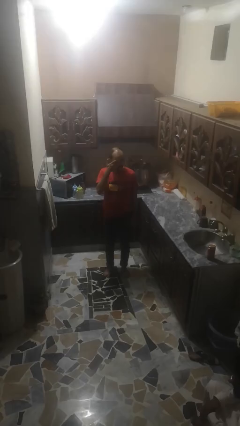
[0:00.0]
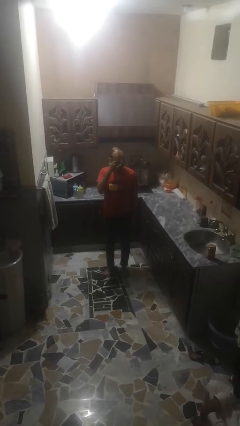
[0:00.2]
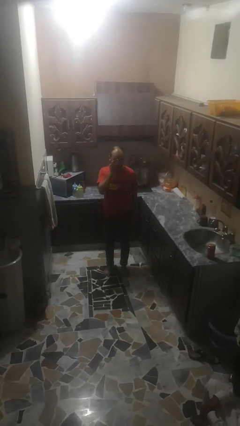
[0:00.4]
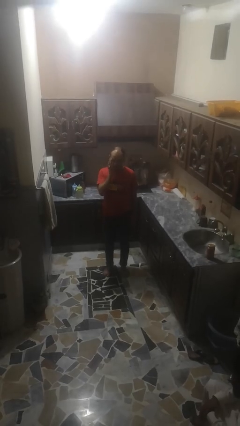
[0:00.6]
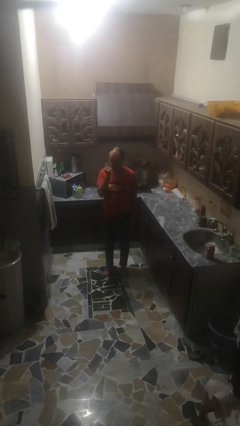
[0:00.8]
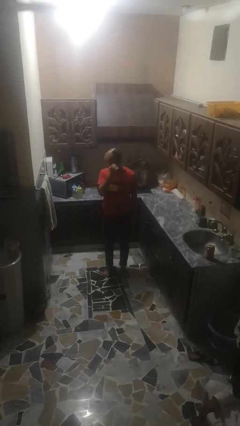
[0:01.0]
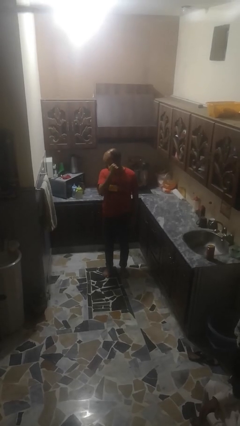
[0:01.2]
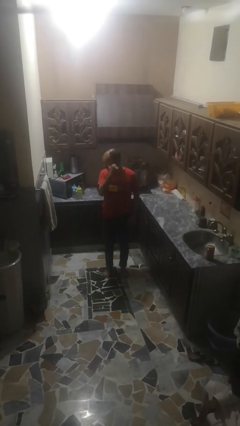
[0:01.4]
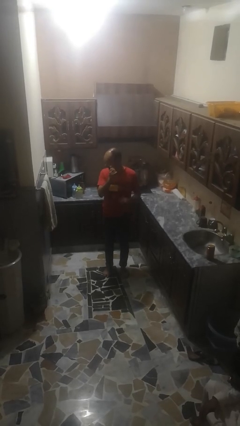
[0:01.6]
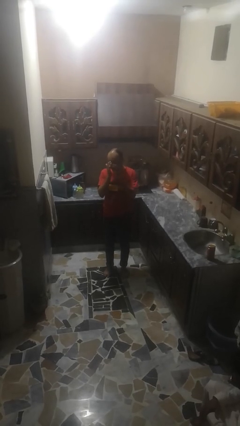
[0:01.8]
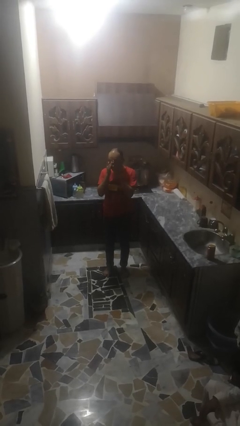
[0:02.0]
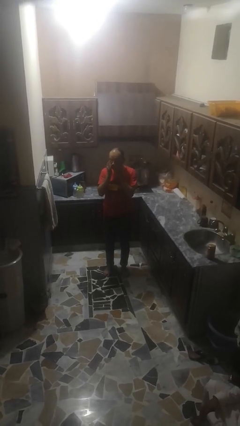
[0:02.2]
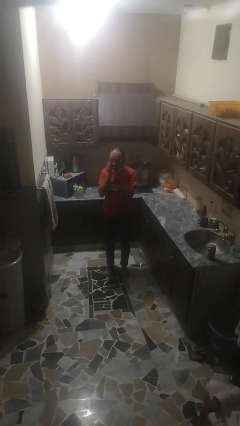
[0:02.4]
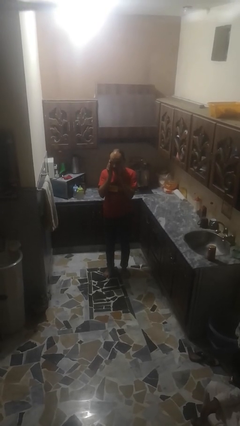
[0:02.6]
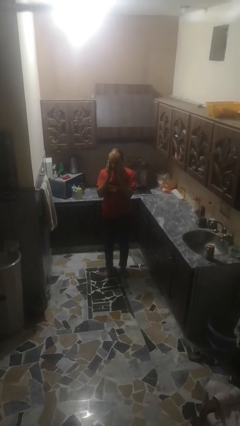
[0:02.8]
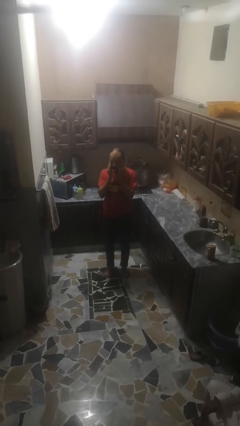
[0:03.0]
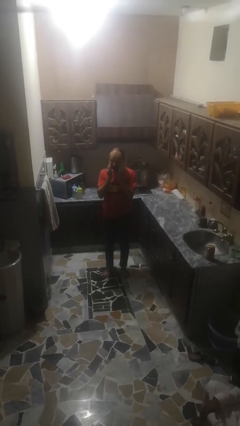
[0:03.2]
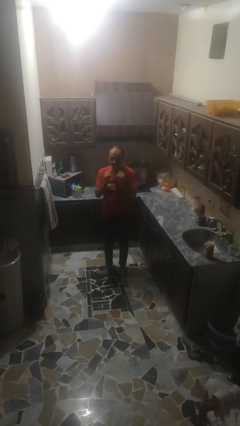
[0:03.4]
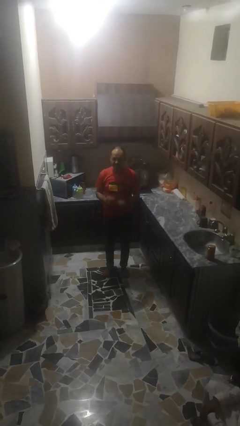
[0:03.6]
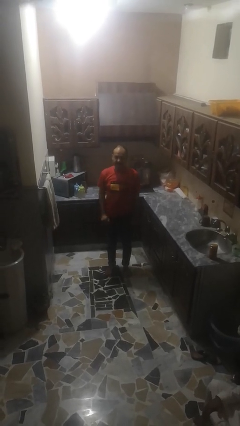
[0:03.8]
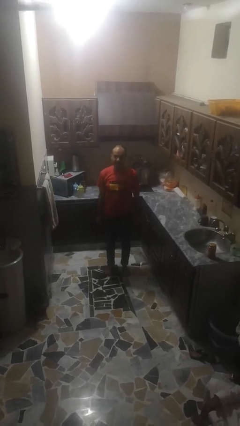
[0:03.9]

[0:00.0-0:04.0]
person rubs eyes

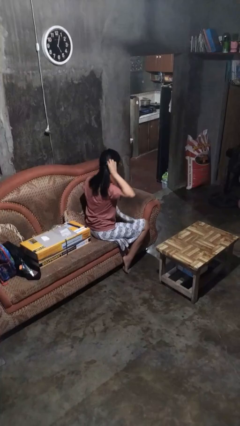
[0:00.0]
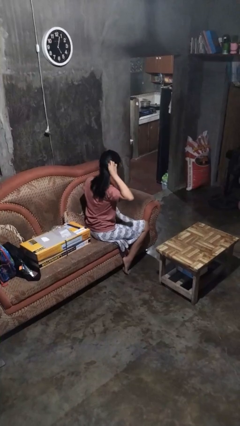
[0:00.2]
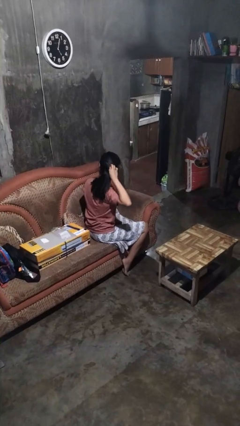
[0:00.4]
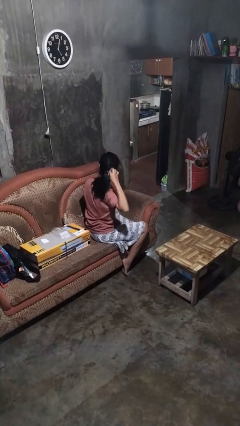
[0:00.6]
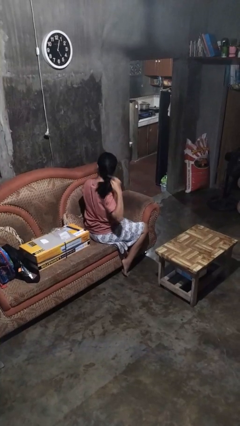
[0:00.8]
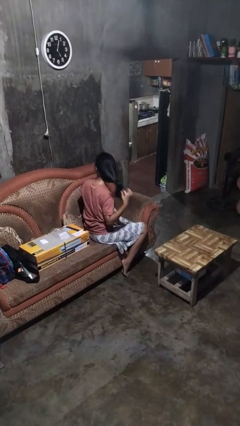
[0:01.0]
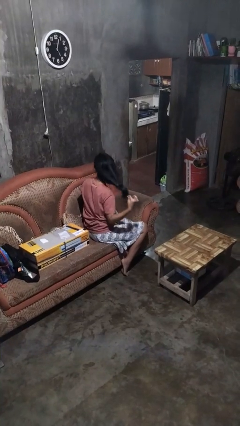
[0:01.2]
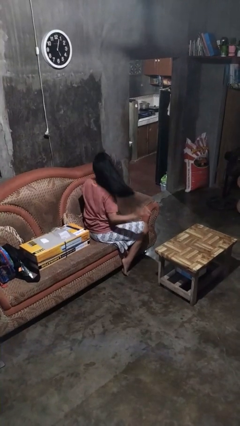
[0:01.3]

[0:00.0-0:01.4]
person takes off hairtie

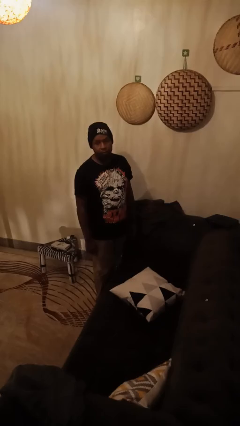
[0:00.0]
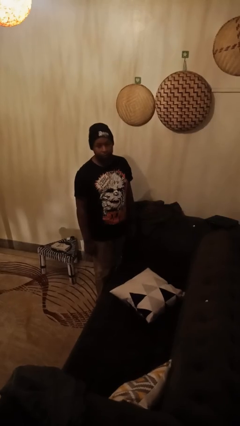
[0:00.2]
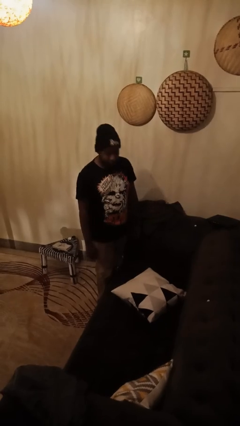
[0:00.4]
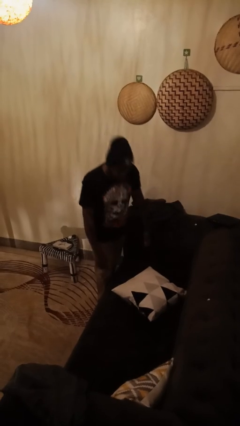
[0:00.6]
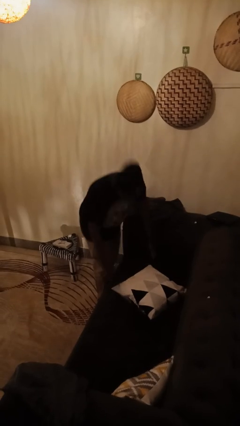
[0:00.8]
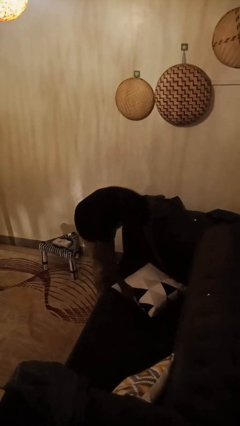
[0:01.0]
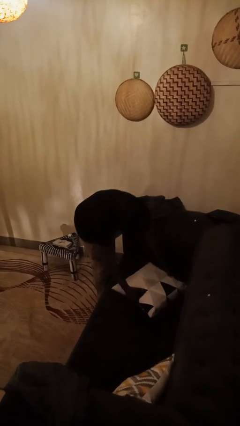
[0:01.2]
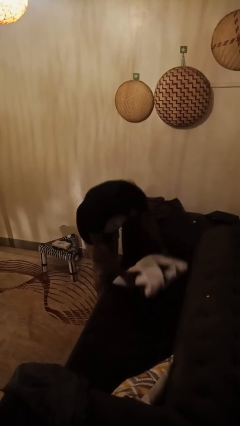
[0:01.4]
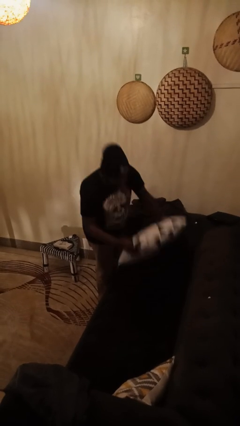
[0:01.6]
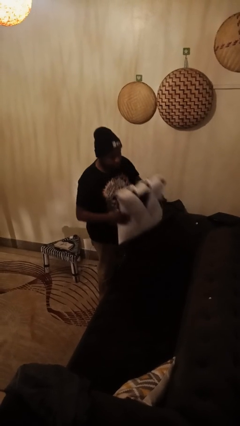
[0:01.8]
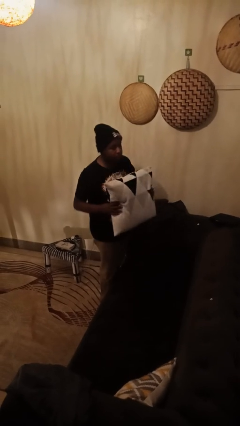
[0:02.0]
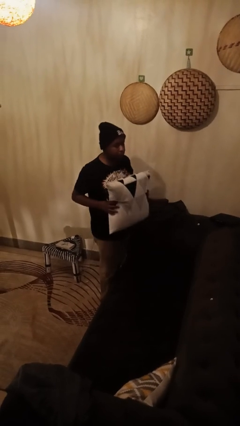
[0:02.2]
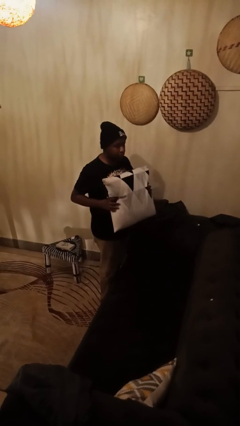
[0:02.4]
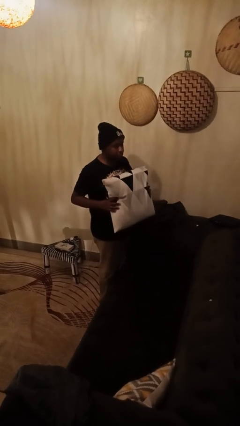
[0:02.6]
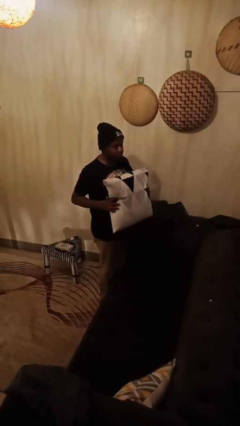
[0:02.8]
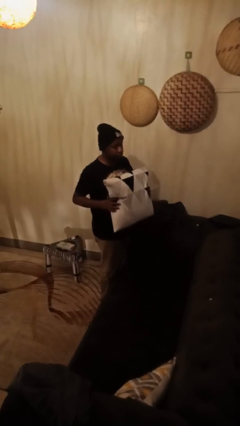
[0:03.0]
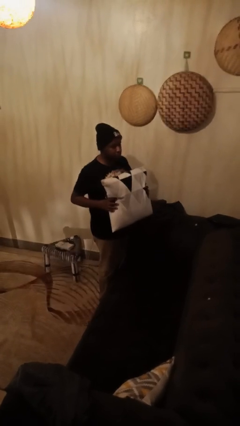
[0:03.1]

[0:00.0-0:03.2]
person picks up object from couch

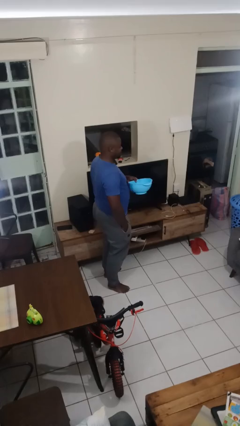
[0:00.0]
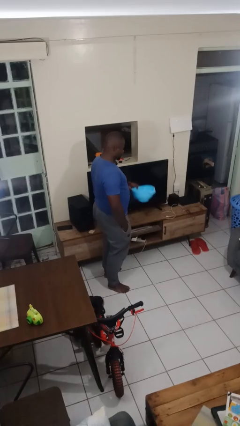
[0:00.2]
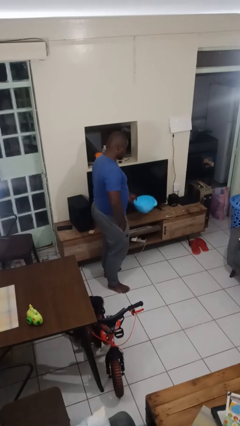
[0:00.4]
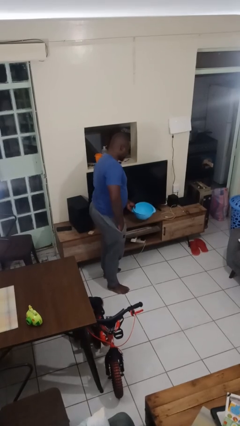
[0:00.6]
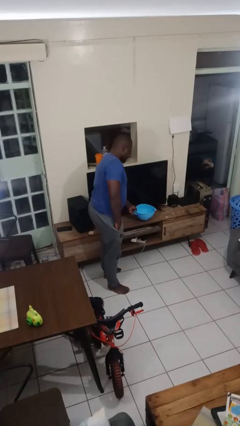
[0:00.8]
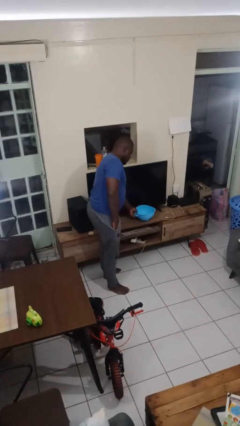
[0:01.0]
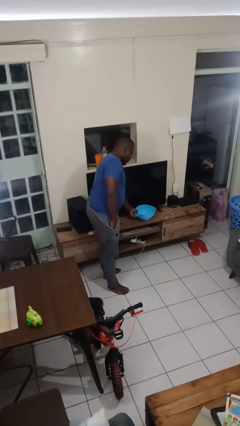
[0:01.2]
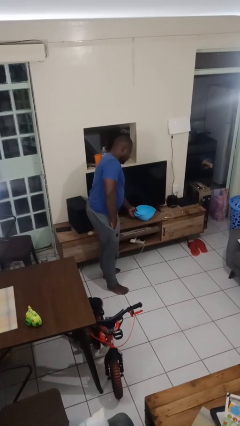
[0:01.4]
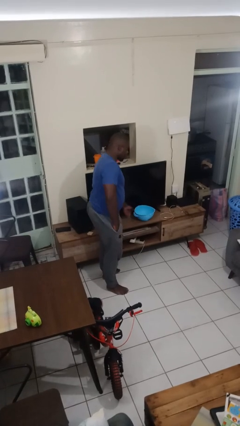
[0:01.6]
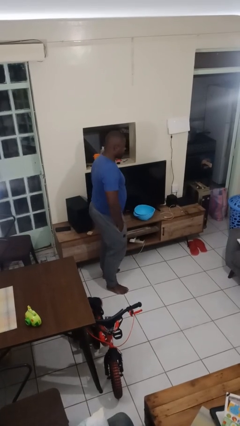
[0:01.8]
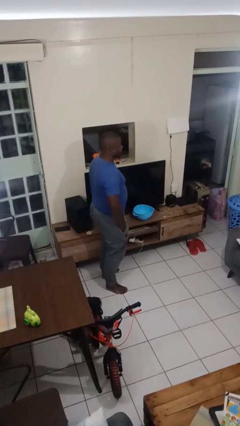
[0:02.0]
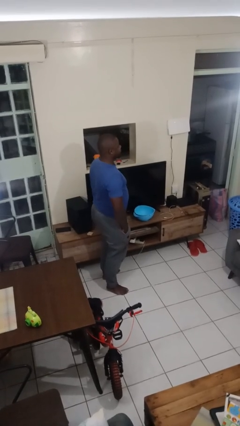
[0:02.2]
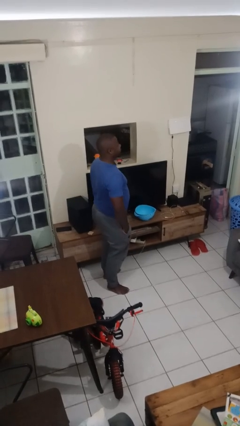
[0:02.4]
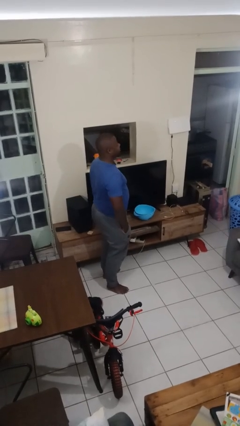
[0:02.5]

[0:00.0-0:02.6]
person puts down object on countertop

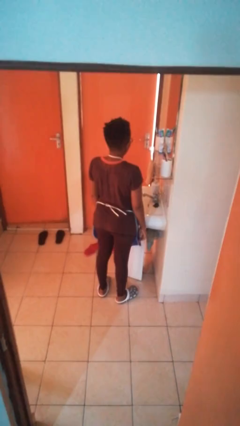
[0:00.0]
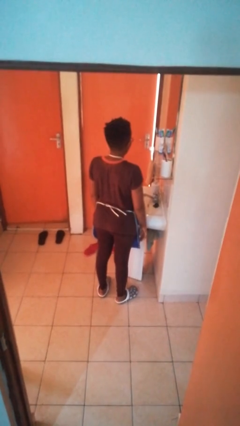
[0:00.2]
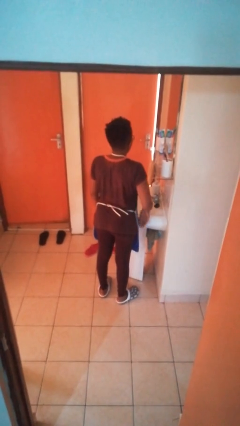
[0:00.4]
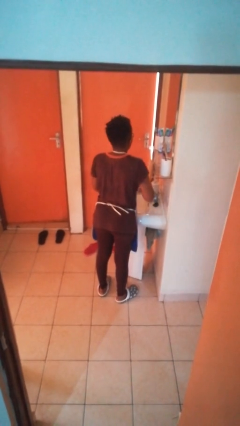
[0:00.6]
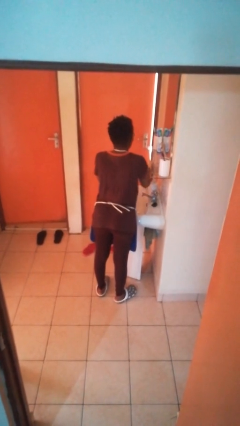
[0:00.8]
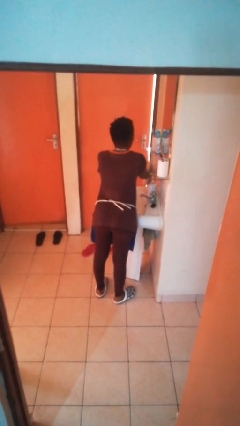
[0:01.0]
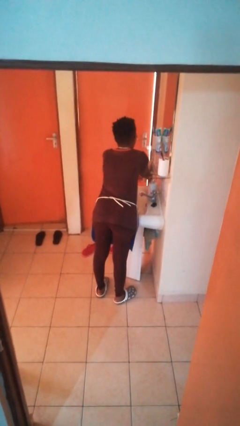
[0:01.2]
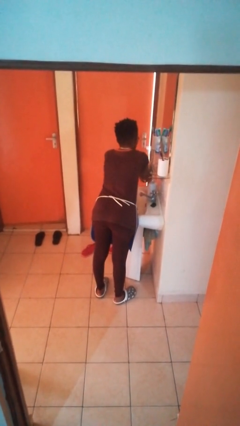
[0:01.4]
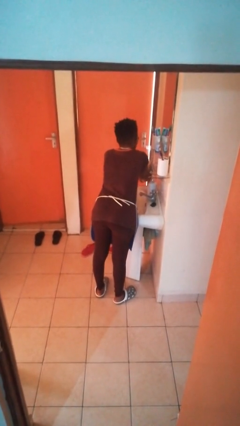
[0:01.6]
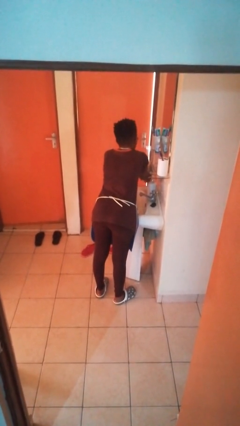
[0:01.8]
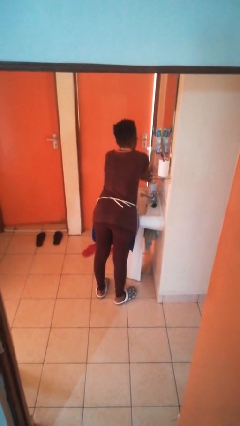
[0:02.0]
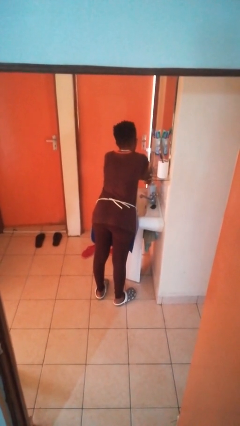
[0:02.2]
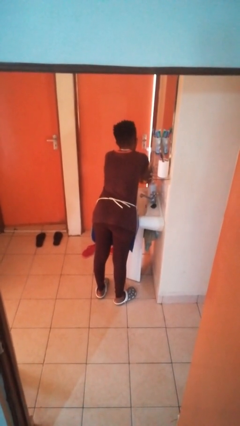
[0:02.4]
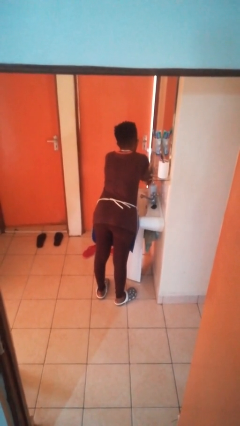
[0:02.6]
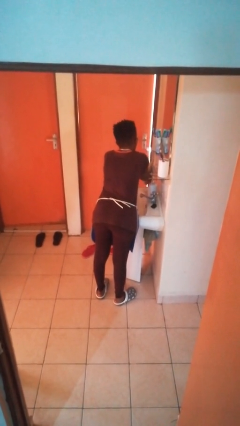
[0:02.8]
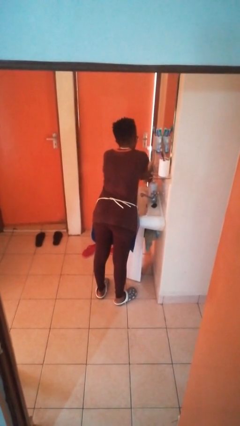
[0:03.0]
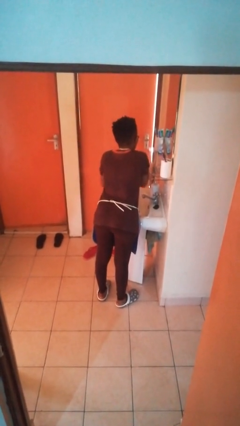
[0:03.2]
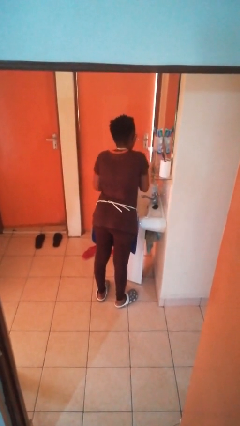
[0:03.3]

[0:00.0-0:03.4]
person dries hands with towel

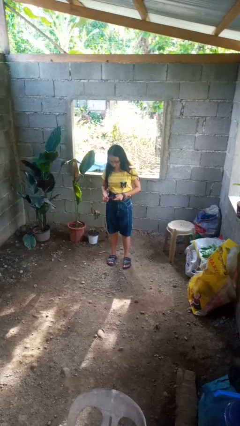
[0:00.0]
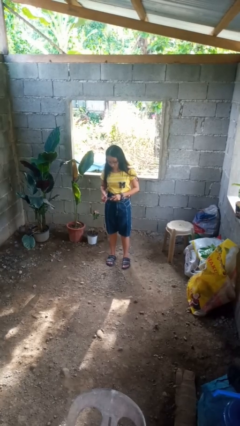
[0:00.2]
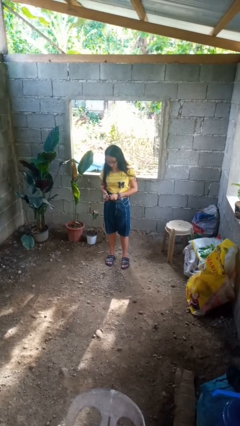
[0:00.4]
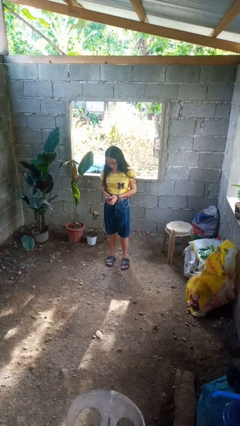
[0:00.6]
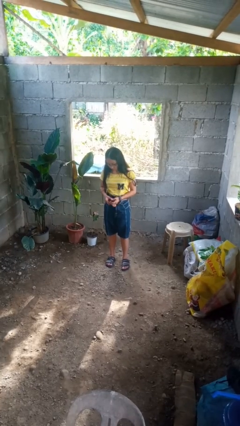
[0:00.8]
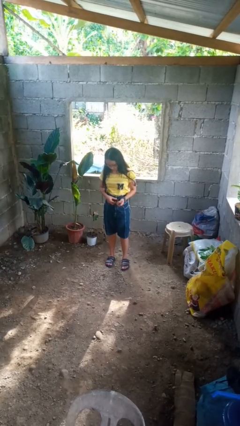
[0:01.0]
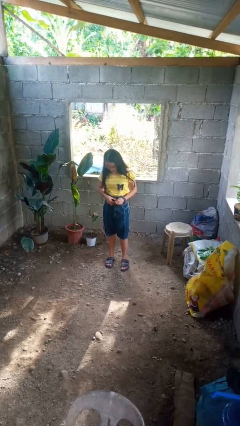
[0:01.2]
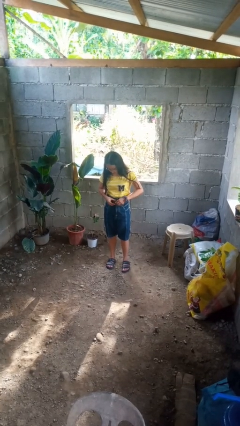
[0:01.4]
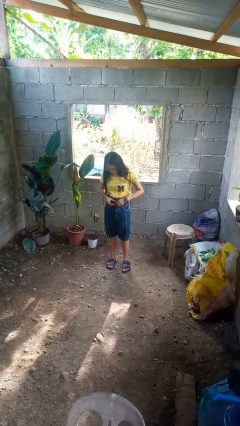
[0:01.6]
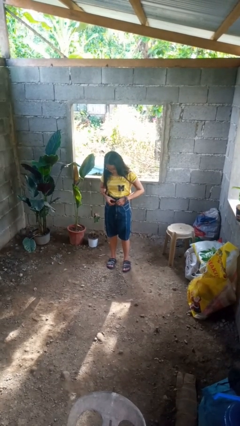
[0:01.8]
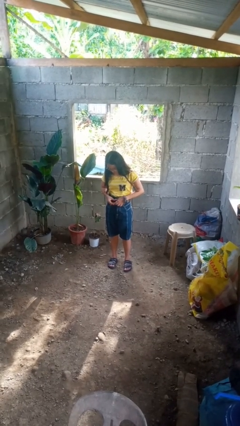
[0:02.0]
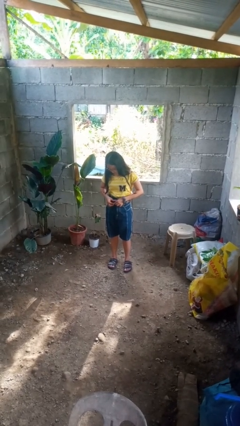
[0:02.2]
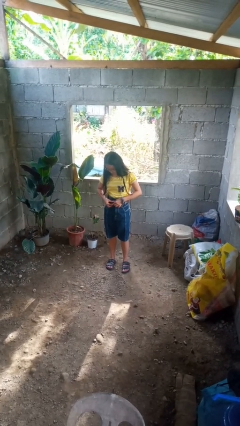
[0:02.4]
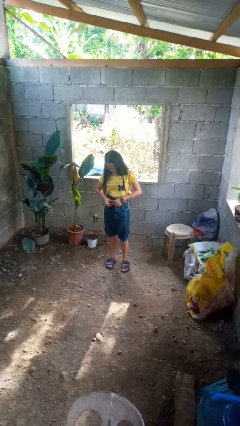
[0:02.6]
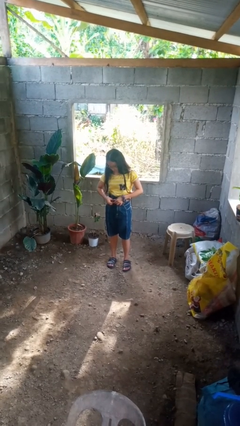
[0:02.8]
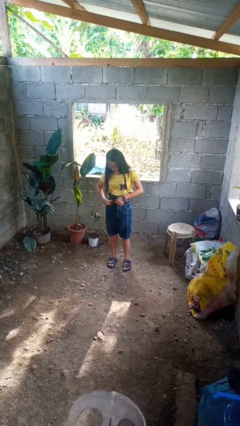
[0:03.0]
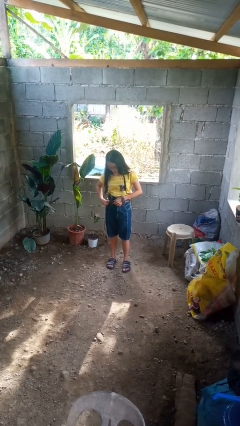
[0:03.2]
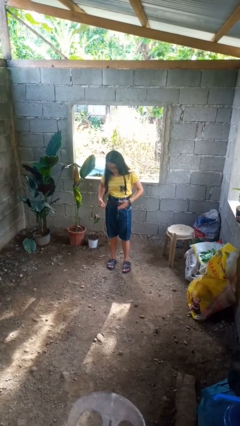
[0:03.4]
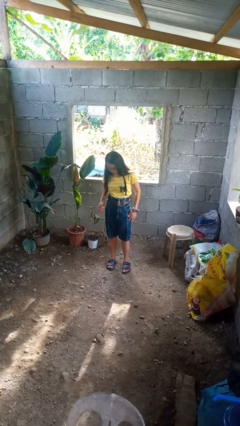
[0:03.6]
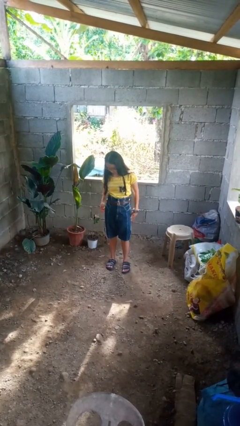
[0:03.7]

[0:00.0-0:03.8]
person puts on belt
